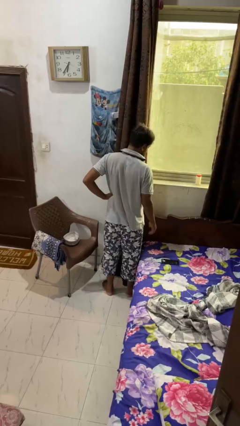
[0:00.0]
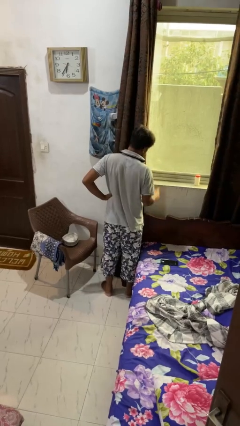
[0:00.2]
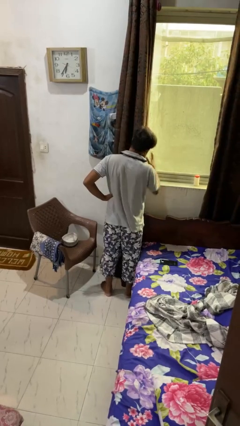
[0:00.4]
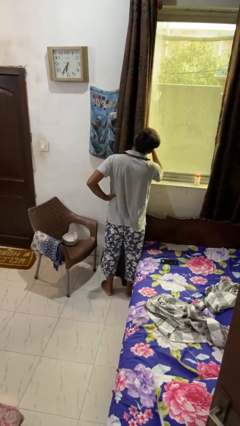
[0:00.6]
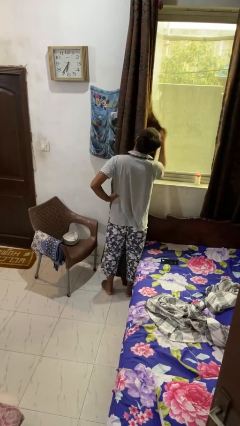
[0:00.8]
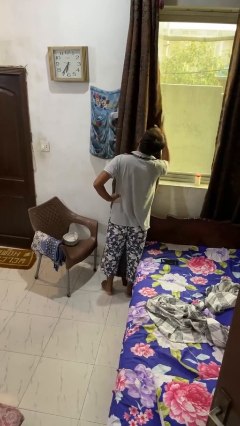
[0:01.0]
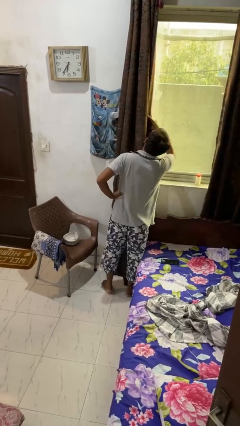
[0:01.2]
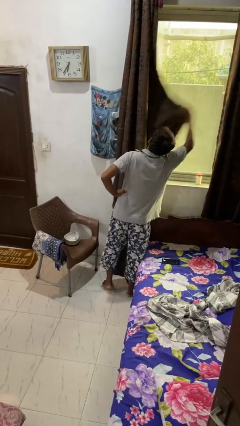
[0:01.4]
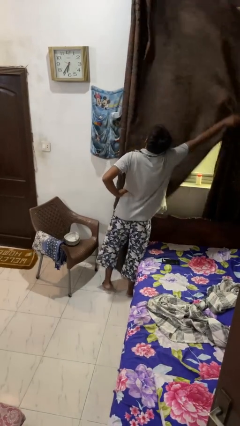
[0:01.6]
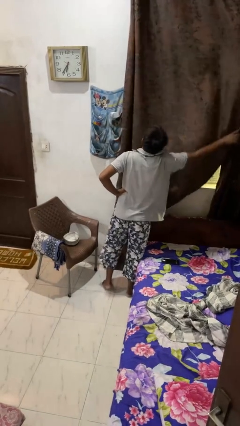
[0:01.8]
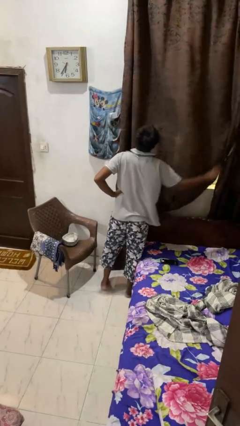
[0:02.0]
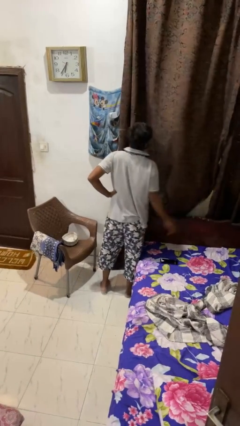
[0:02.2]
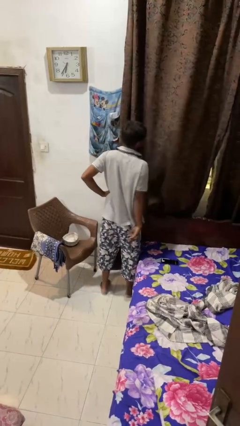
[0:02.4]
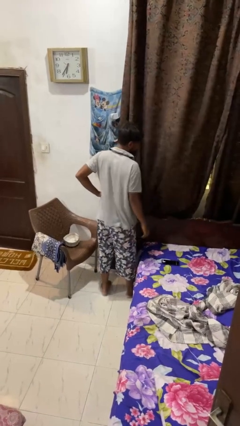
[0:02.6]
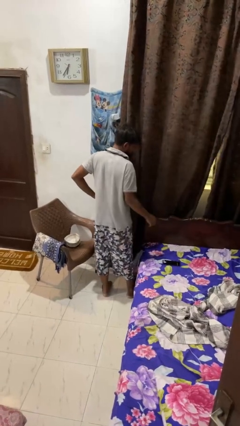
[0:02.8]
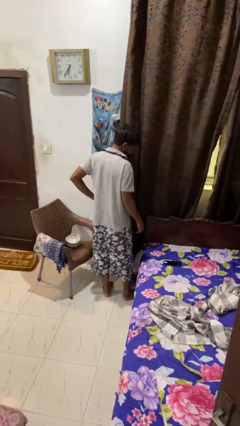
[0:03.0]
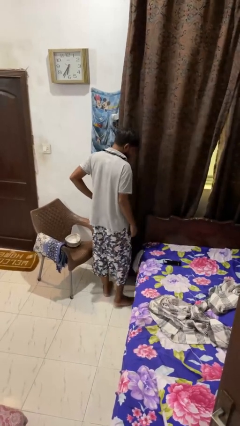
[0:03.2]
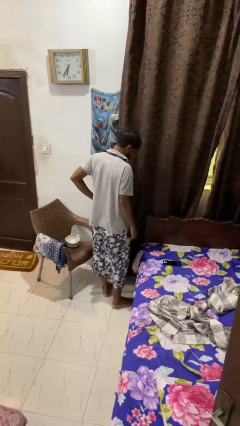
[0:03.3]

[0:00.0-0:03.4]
person closes curtains

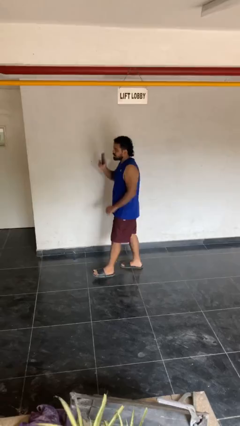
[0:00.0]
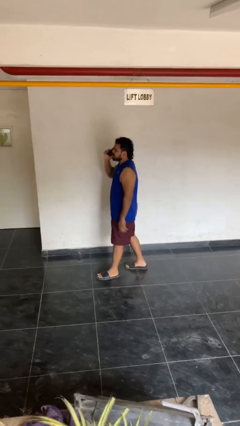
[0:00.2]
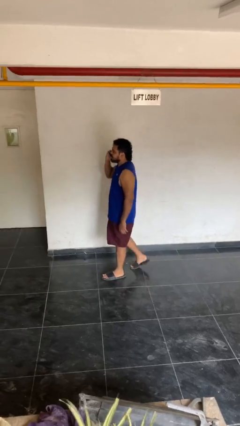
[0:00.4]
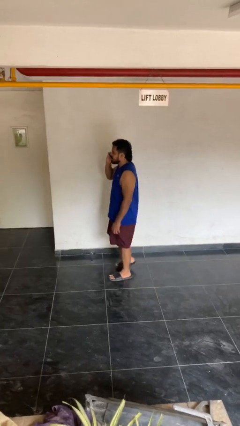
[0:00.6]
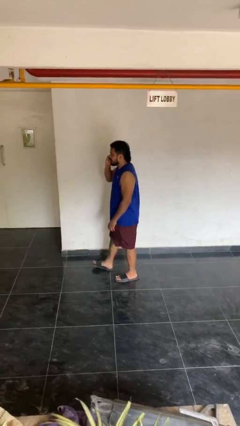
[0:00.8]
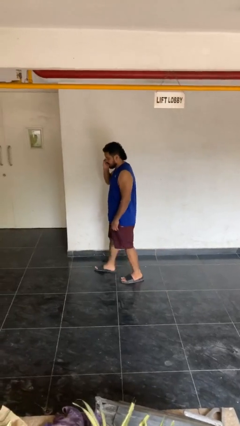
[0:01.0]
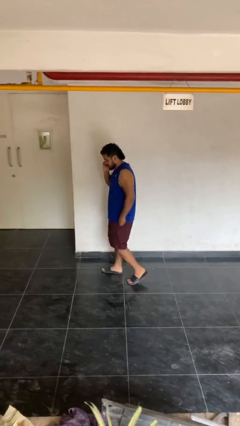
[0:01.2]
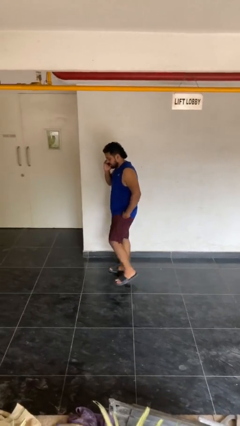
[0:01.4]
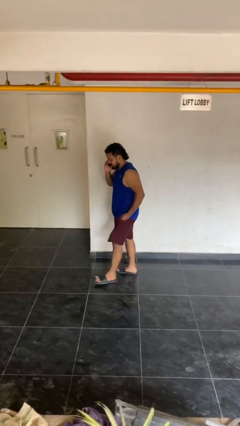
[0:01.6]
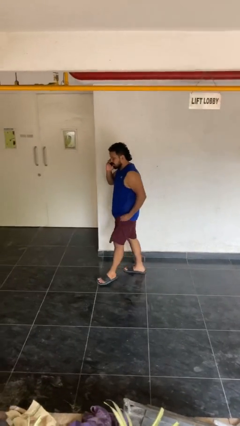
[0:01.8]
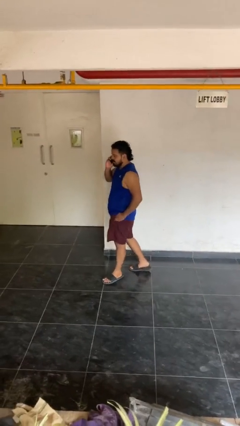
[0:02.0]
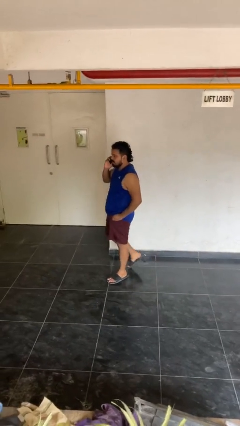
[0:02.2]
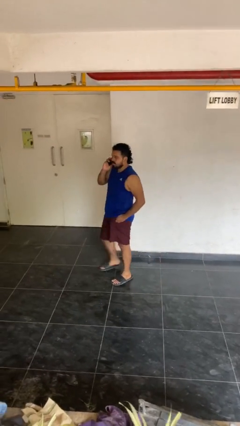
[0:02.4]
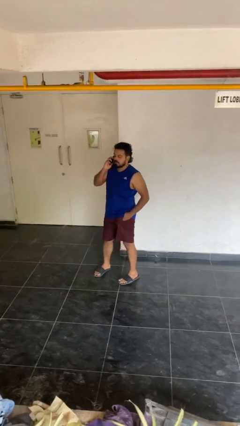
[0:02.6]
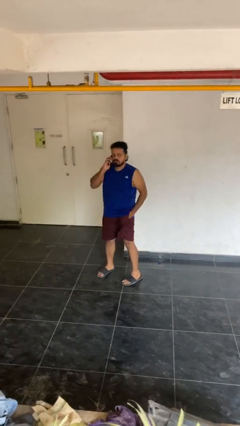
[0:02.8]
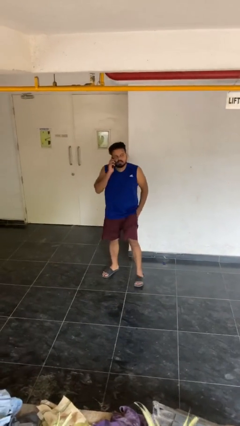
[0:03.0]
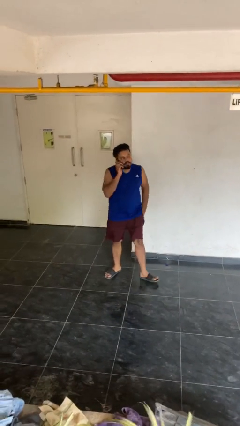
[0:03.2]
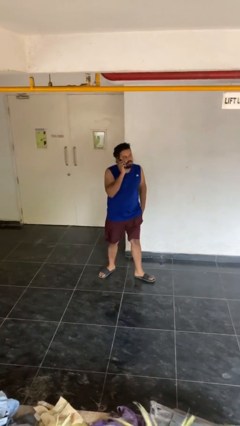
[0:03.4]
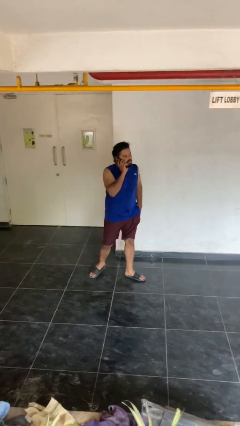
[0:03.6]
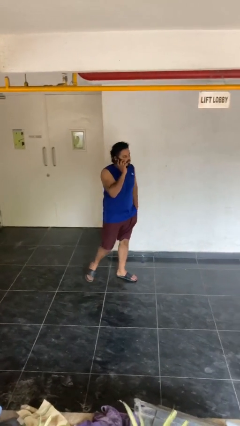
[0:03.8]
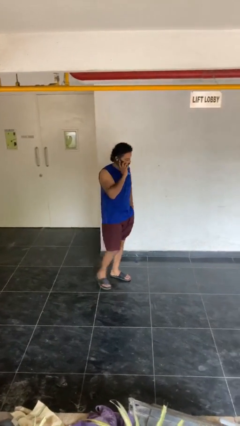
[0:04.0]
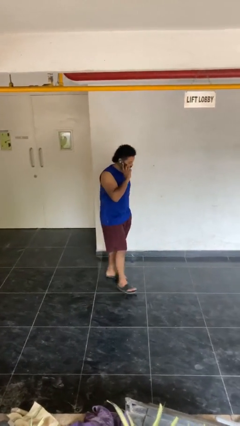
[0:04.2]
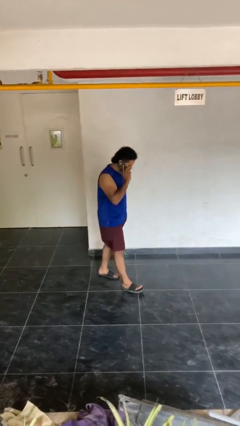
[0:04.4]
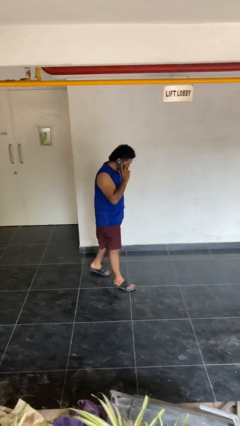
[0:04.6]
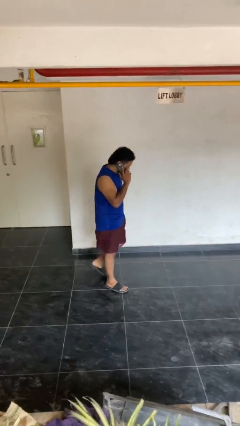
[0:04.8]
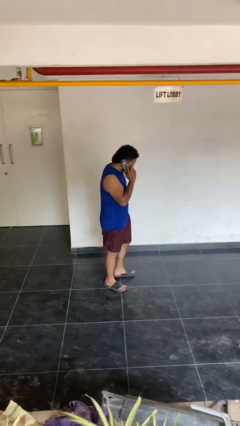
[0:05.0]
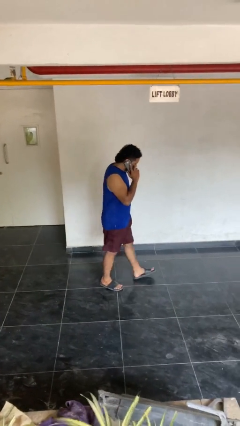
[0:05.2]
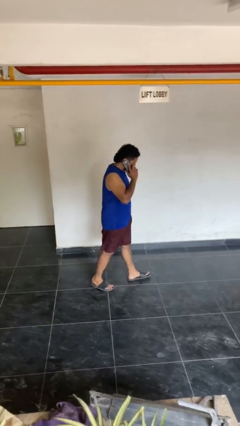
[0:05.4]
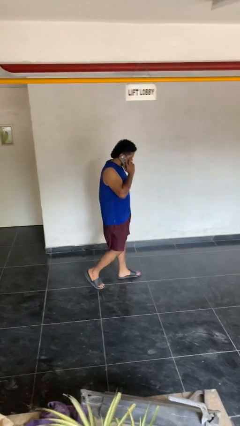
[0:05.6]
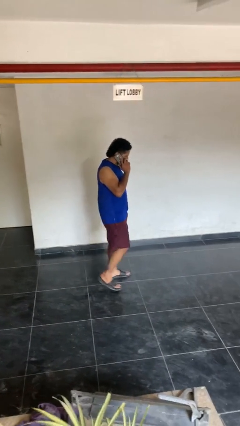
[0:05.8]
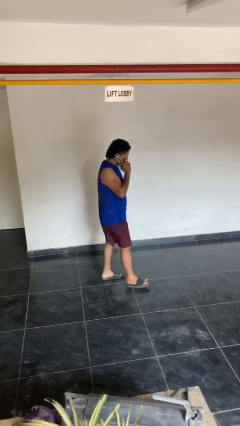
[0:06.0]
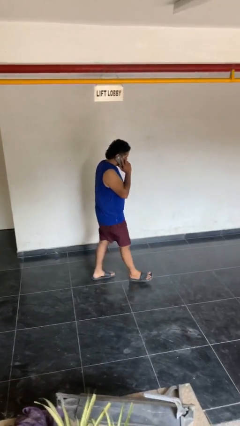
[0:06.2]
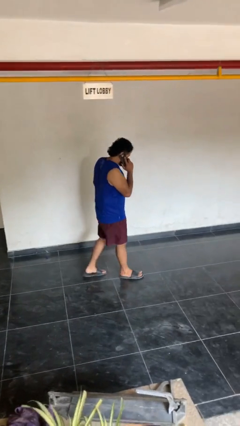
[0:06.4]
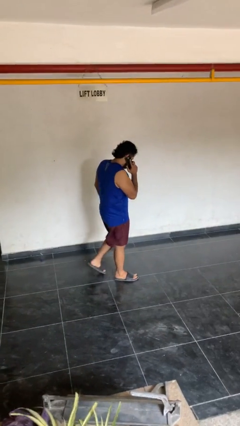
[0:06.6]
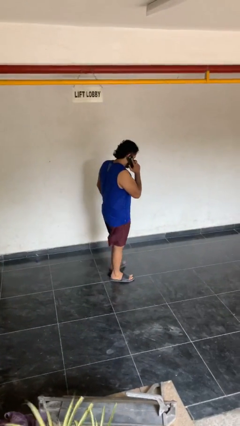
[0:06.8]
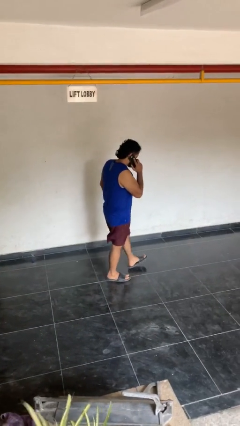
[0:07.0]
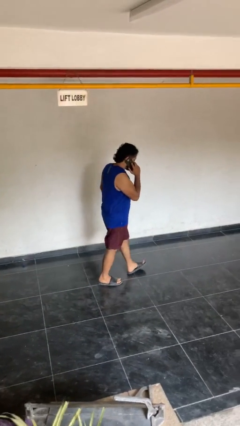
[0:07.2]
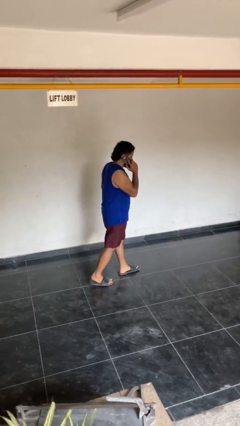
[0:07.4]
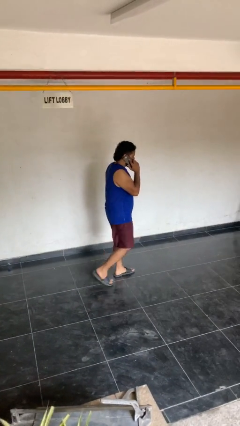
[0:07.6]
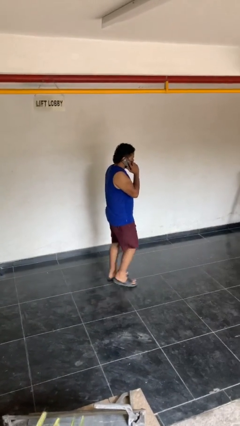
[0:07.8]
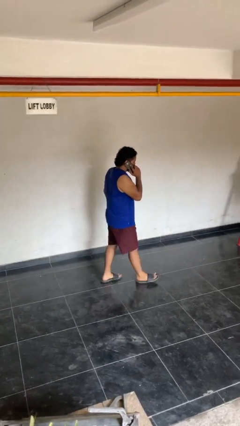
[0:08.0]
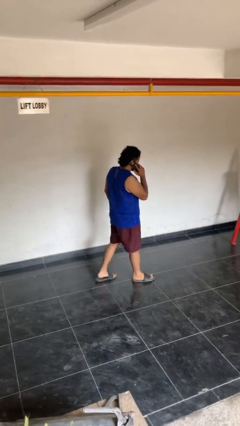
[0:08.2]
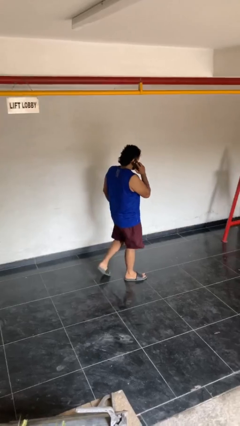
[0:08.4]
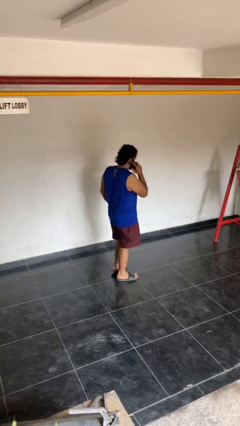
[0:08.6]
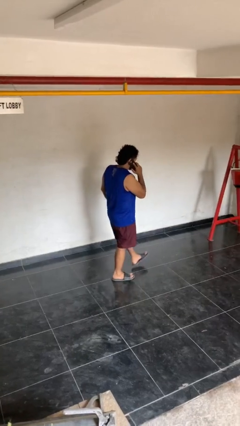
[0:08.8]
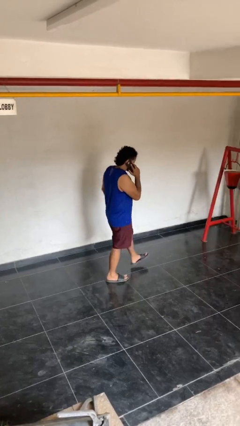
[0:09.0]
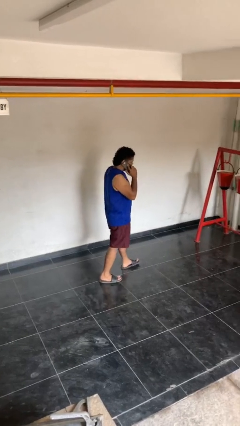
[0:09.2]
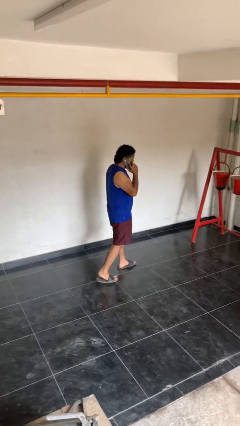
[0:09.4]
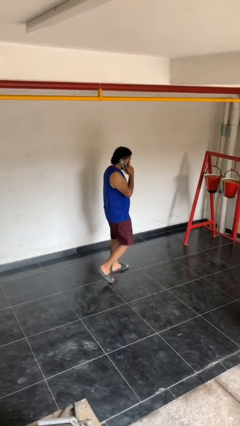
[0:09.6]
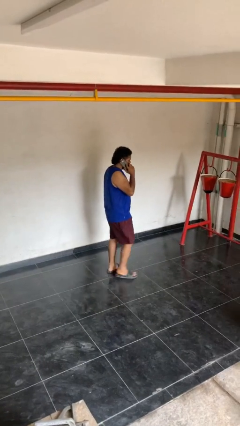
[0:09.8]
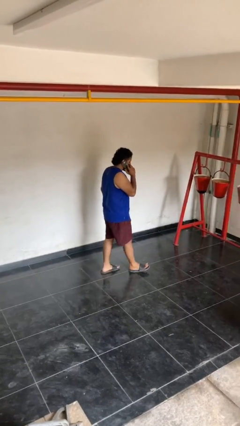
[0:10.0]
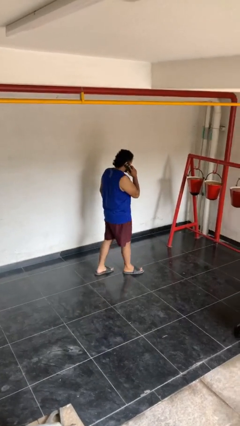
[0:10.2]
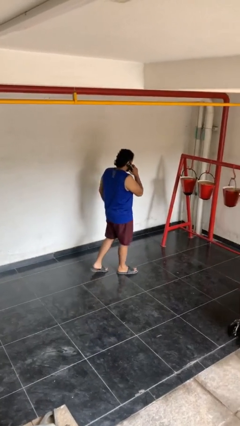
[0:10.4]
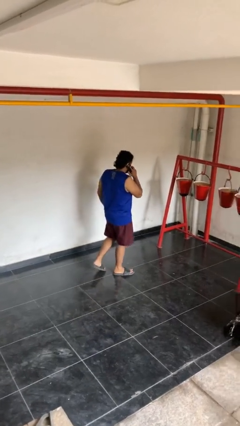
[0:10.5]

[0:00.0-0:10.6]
person talks on phone

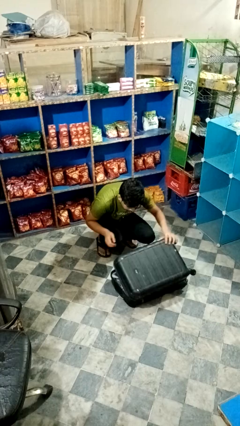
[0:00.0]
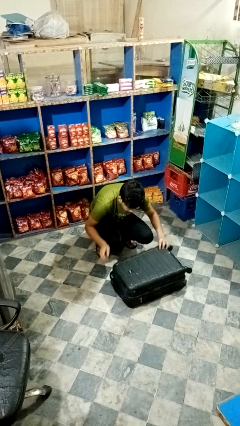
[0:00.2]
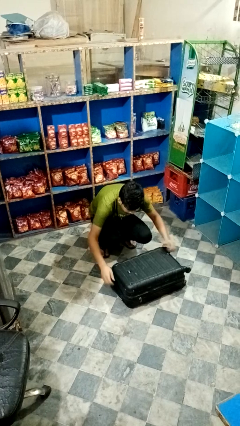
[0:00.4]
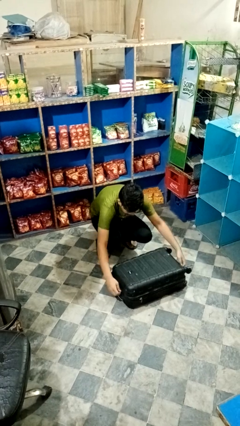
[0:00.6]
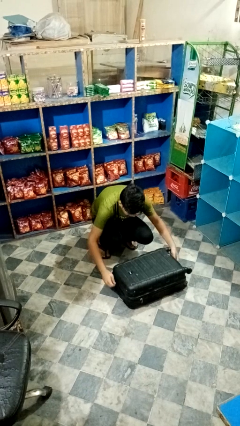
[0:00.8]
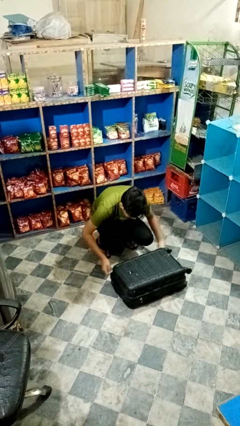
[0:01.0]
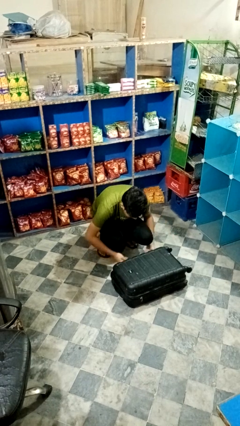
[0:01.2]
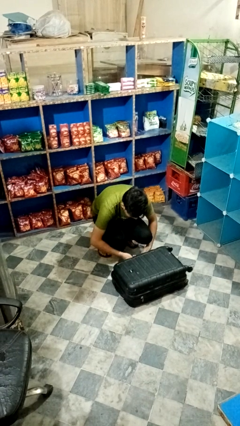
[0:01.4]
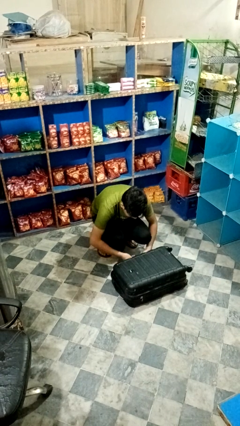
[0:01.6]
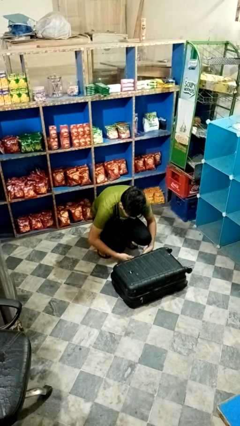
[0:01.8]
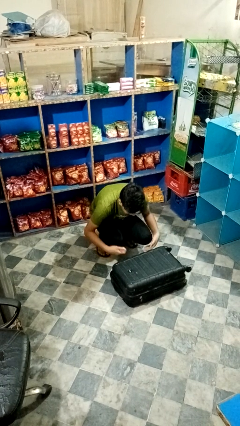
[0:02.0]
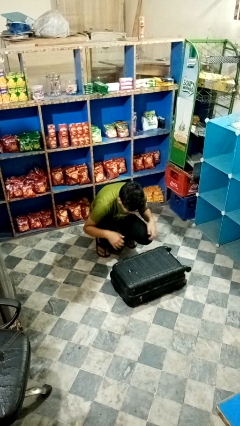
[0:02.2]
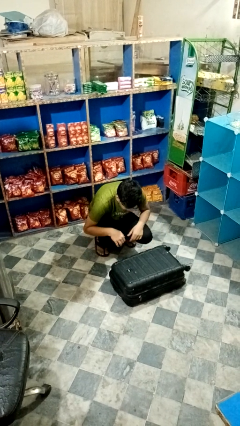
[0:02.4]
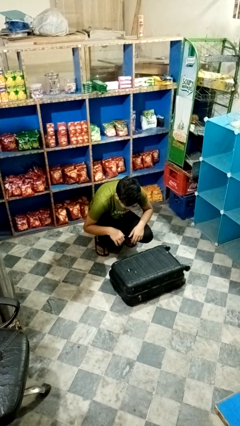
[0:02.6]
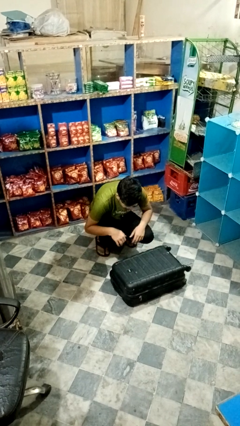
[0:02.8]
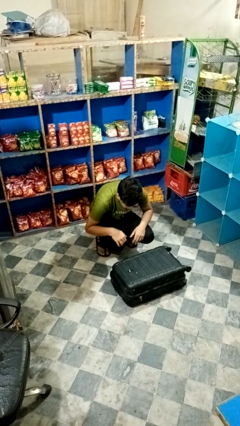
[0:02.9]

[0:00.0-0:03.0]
person closes suitcase

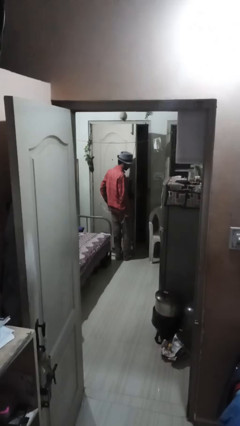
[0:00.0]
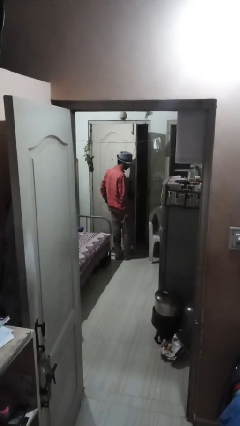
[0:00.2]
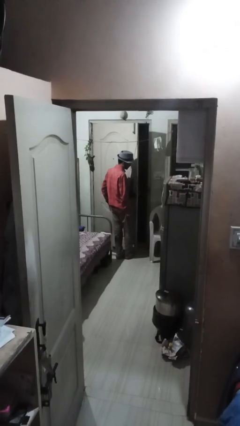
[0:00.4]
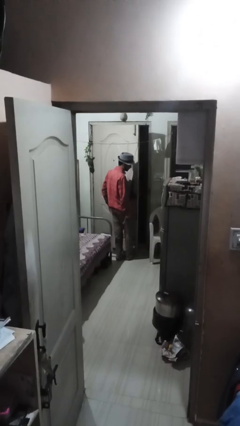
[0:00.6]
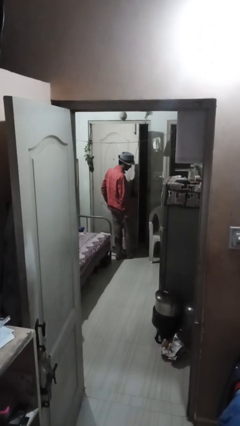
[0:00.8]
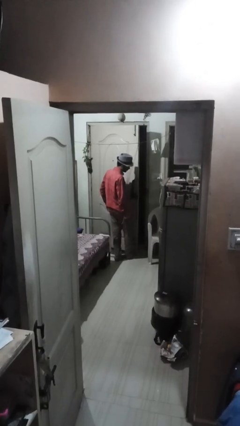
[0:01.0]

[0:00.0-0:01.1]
person closes door with foot
